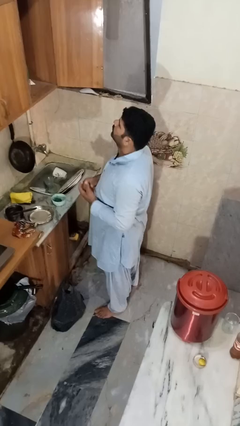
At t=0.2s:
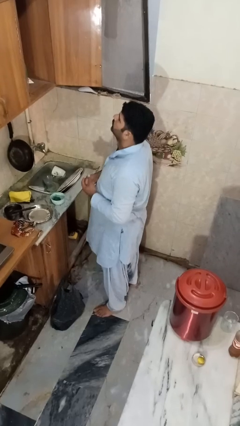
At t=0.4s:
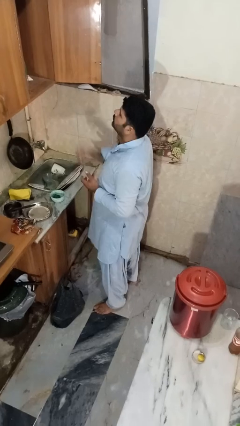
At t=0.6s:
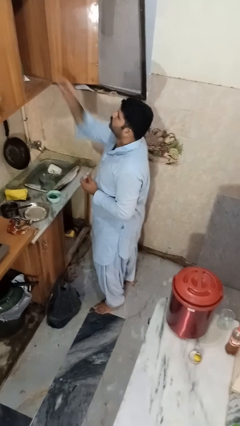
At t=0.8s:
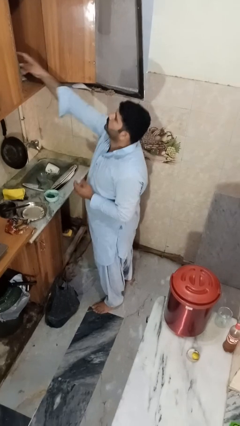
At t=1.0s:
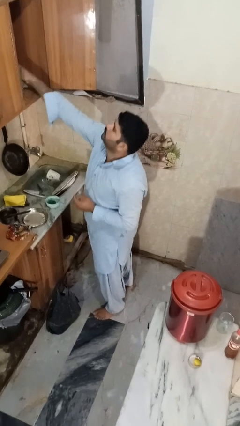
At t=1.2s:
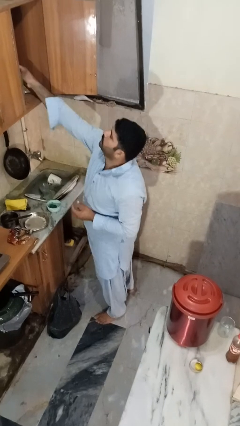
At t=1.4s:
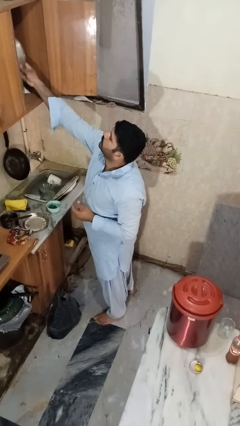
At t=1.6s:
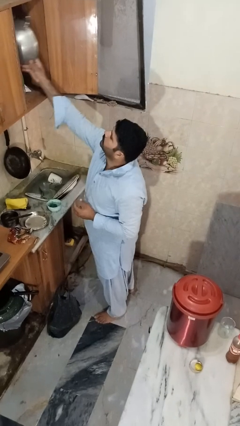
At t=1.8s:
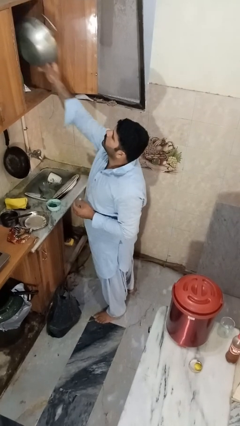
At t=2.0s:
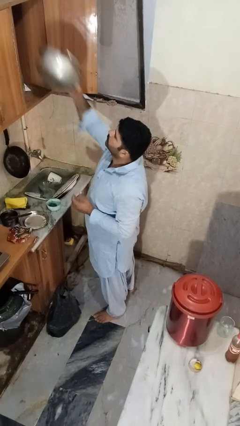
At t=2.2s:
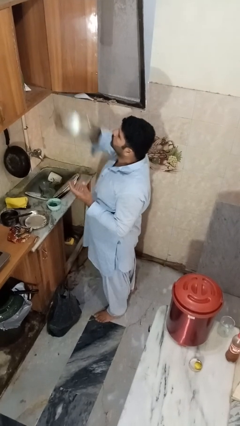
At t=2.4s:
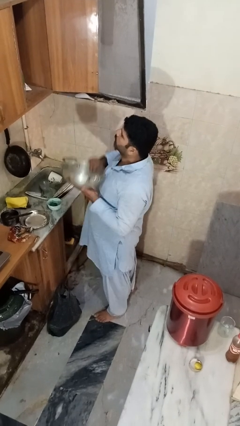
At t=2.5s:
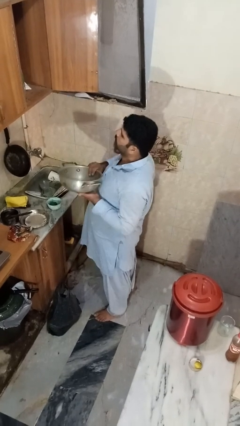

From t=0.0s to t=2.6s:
person takes object from cabinet

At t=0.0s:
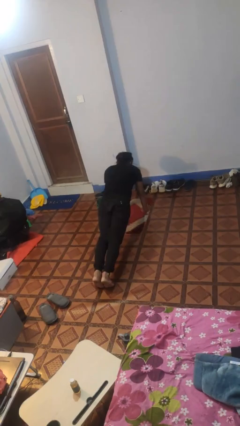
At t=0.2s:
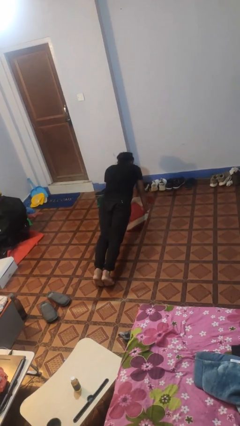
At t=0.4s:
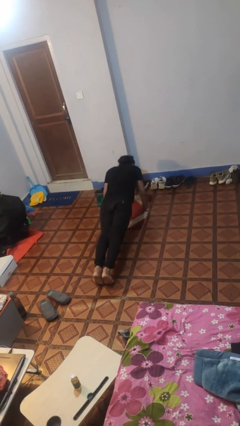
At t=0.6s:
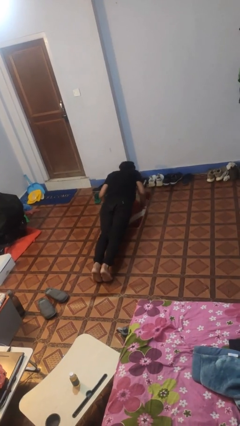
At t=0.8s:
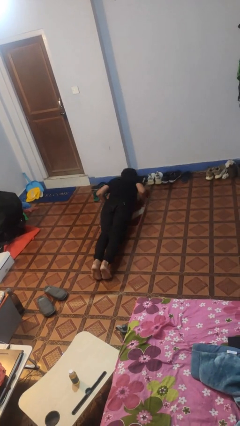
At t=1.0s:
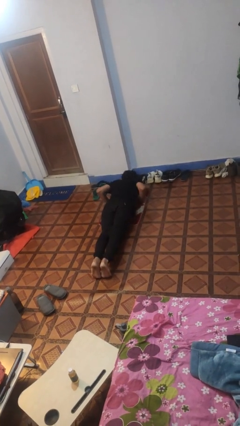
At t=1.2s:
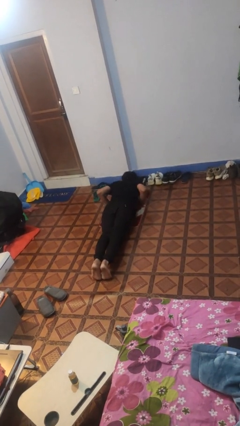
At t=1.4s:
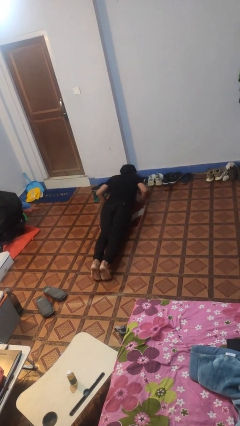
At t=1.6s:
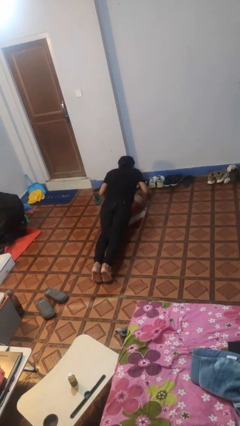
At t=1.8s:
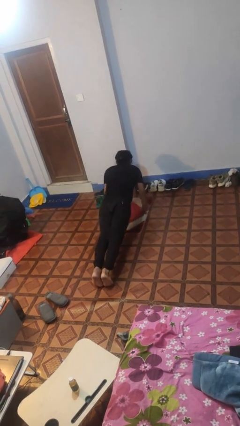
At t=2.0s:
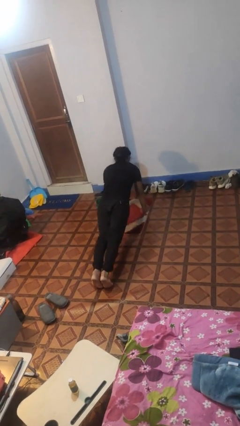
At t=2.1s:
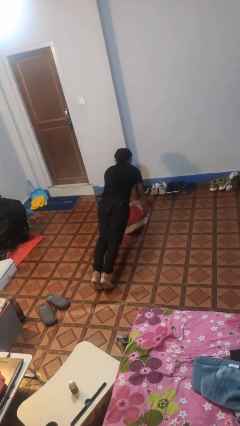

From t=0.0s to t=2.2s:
person exercises with pushup

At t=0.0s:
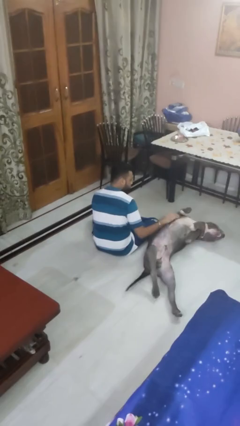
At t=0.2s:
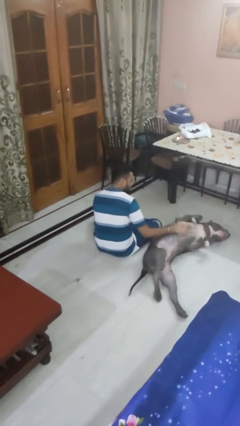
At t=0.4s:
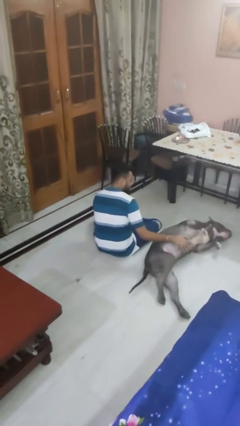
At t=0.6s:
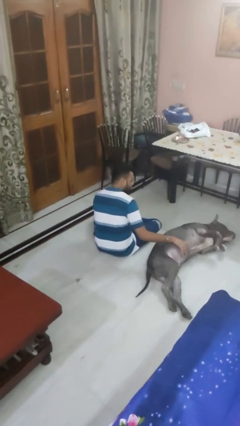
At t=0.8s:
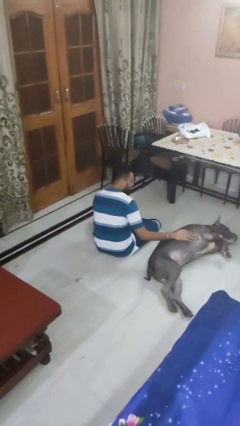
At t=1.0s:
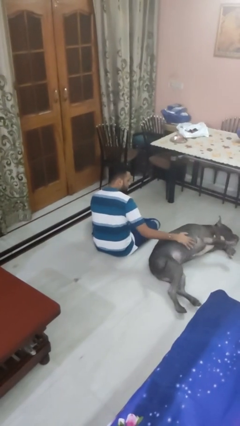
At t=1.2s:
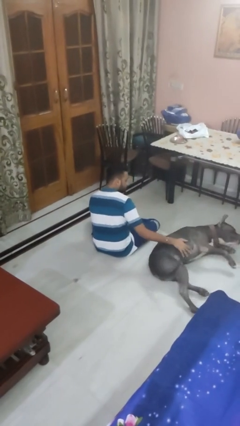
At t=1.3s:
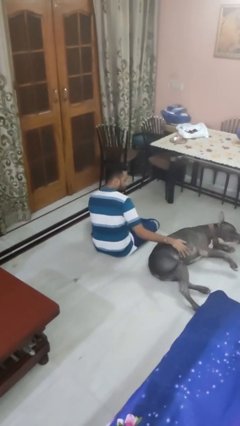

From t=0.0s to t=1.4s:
person pets dog

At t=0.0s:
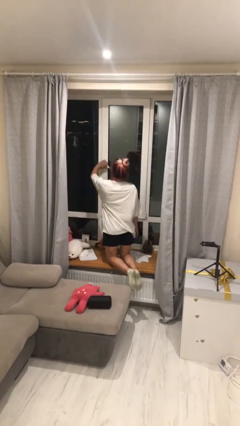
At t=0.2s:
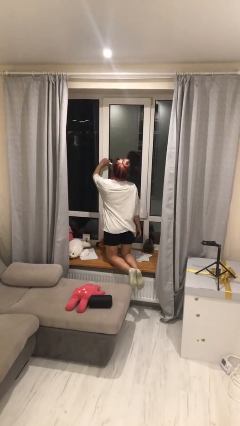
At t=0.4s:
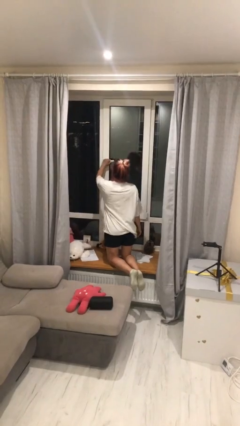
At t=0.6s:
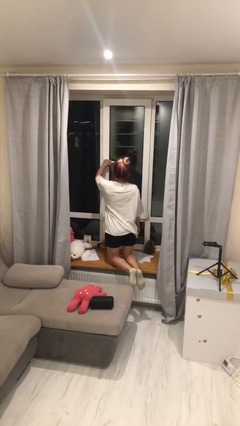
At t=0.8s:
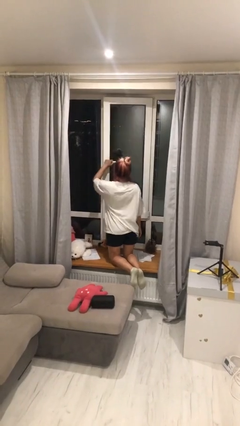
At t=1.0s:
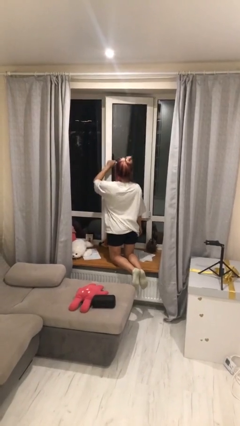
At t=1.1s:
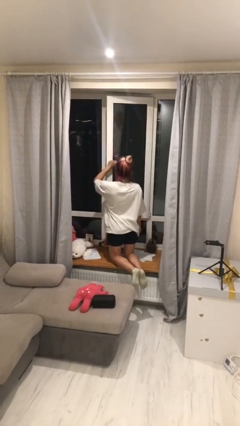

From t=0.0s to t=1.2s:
person opens home window

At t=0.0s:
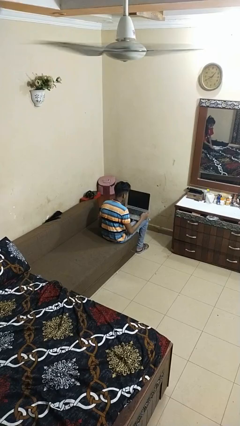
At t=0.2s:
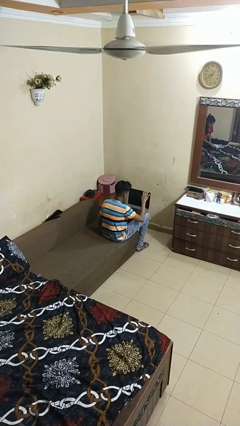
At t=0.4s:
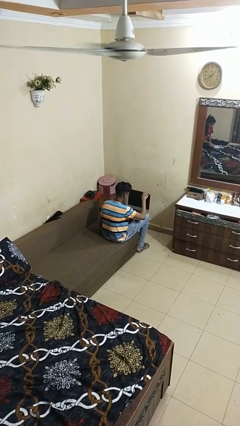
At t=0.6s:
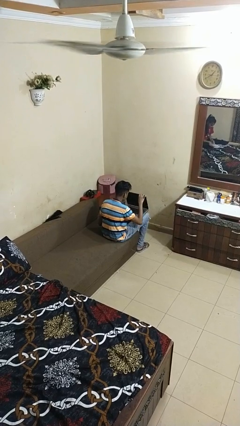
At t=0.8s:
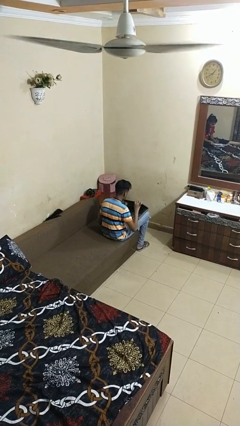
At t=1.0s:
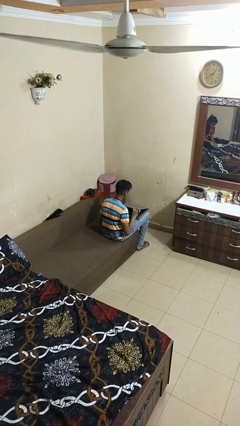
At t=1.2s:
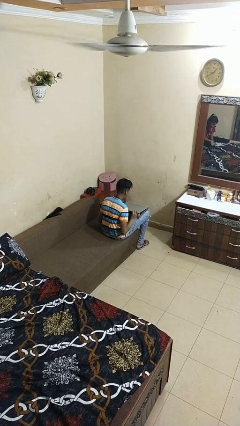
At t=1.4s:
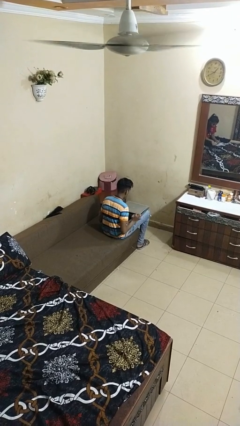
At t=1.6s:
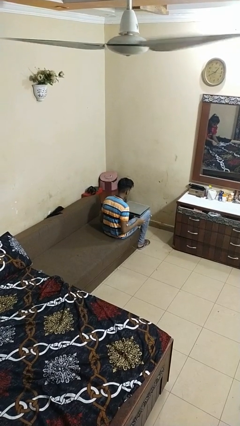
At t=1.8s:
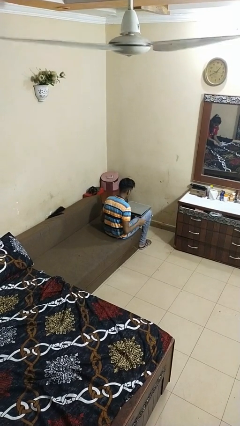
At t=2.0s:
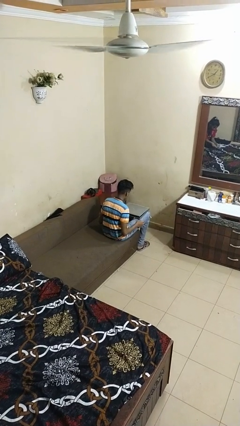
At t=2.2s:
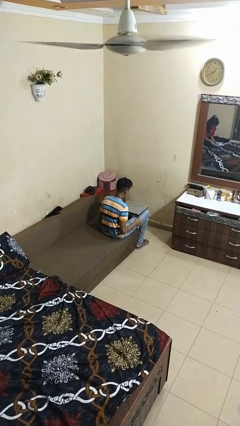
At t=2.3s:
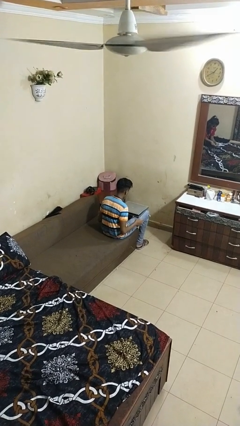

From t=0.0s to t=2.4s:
person closes laptop

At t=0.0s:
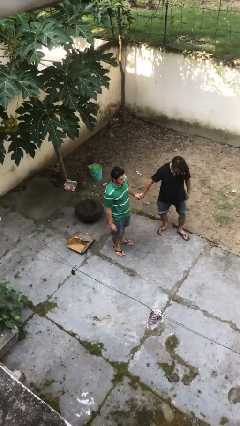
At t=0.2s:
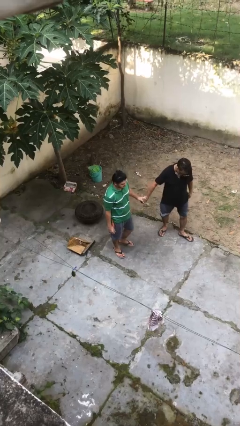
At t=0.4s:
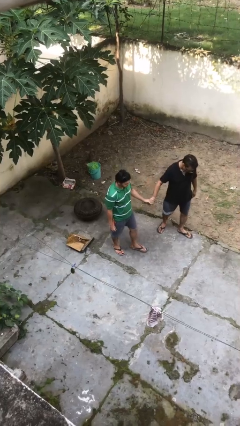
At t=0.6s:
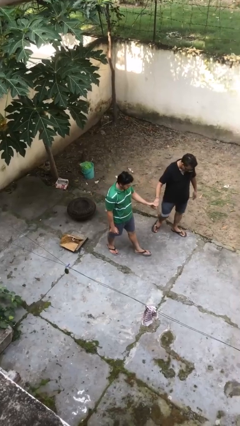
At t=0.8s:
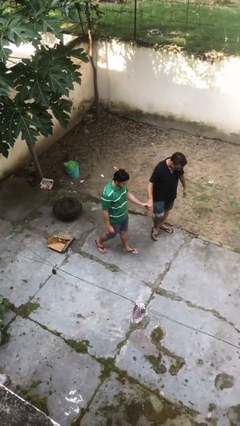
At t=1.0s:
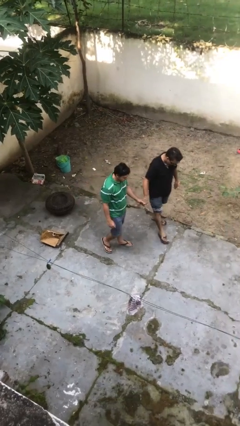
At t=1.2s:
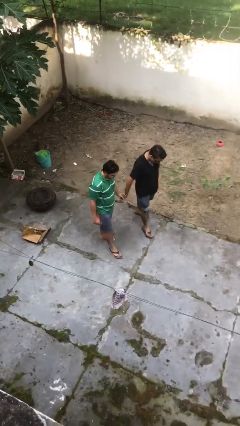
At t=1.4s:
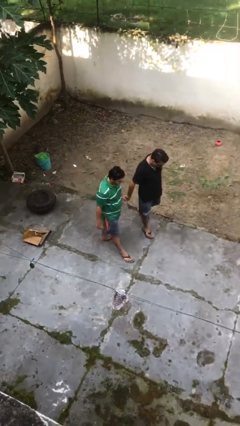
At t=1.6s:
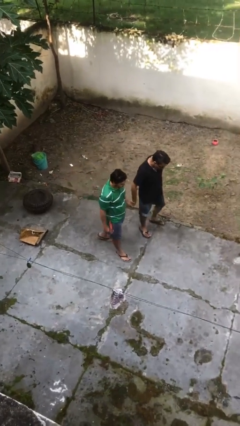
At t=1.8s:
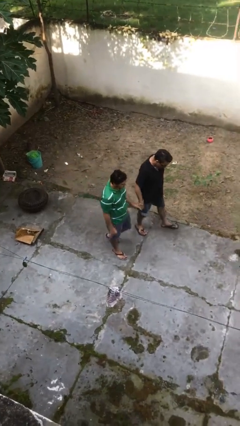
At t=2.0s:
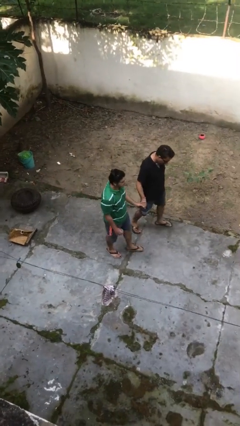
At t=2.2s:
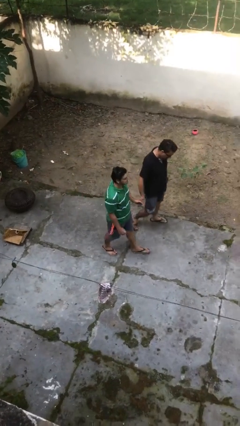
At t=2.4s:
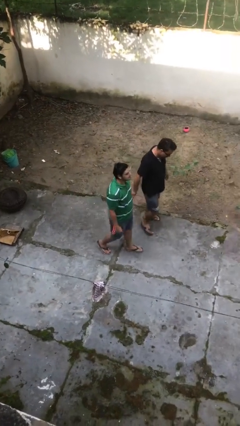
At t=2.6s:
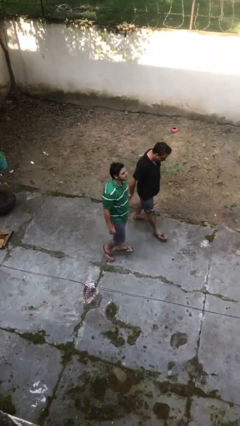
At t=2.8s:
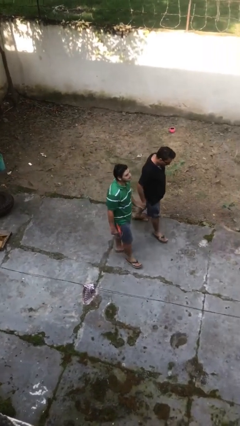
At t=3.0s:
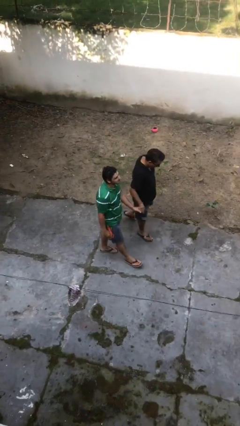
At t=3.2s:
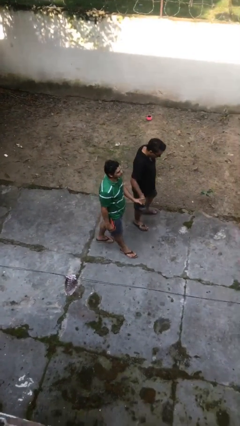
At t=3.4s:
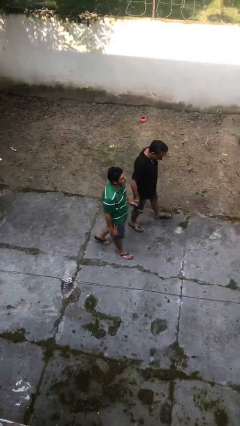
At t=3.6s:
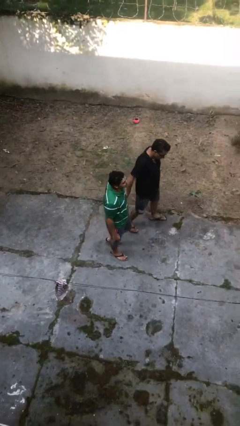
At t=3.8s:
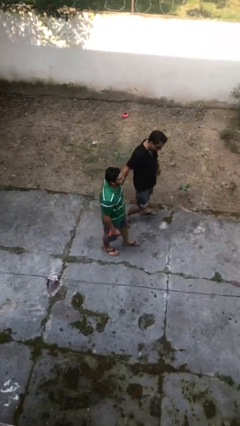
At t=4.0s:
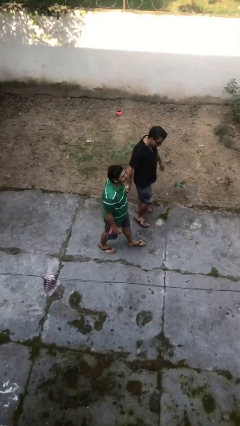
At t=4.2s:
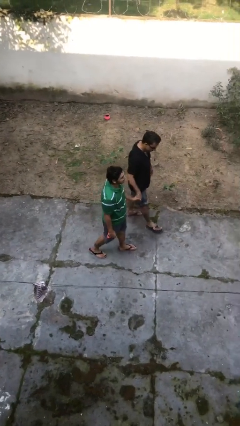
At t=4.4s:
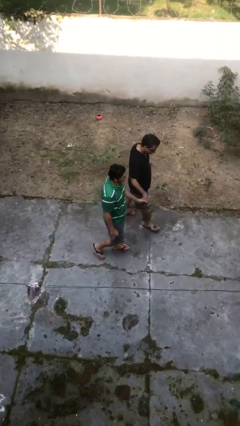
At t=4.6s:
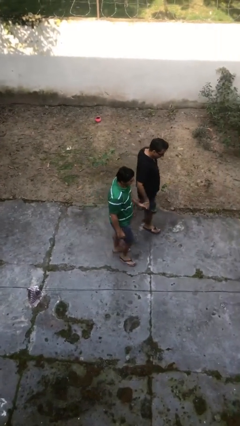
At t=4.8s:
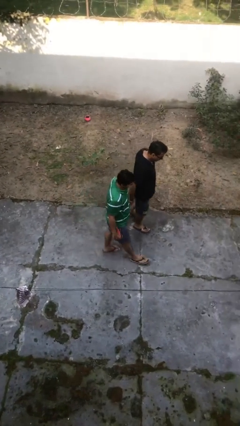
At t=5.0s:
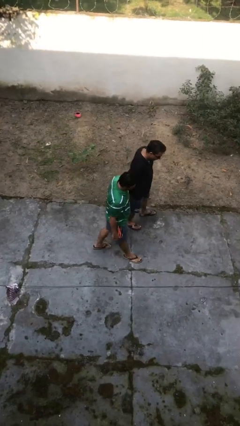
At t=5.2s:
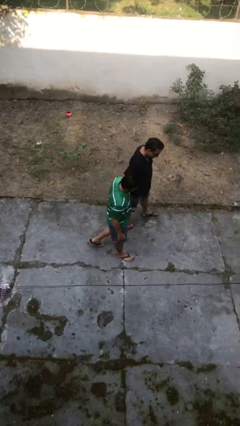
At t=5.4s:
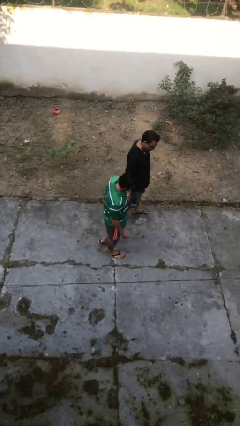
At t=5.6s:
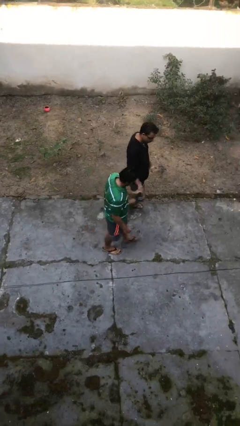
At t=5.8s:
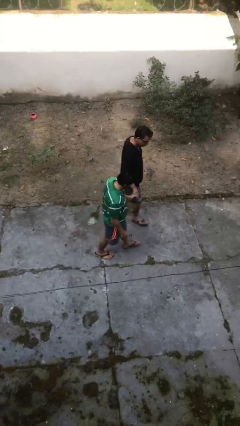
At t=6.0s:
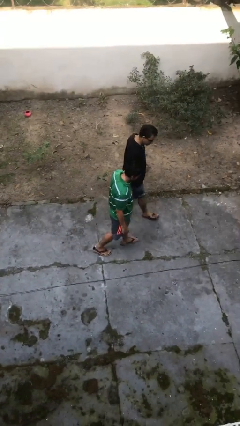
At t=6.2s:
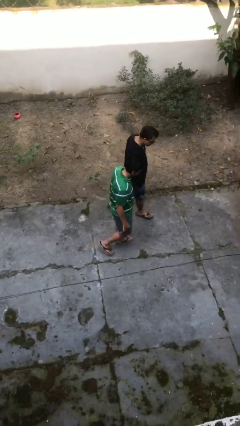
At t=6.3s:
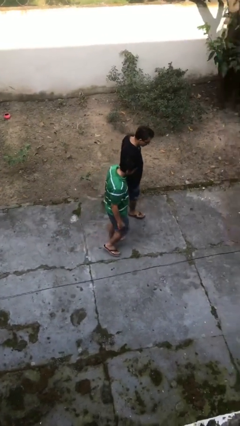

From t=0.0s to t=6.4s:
person holds hand

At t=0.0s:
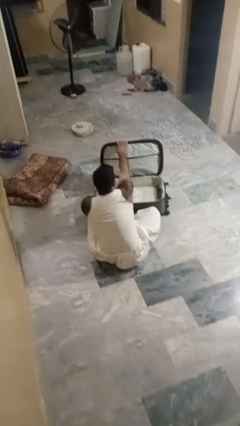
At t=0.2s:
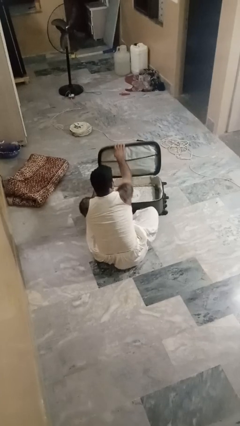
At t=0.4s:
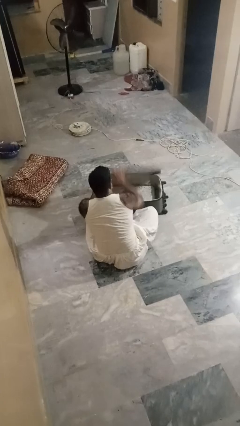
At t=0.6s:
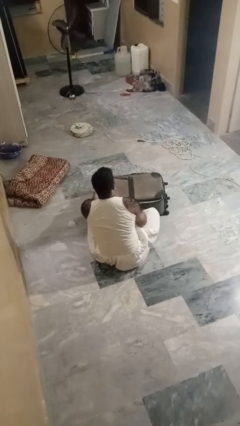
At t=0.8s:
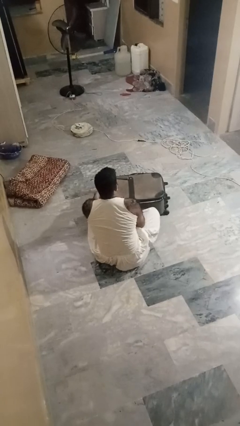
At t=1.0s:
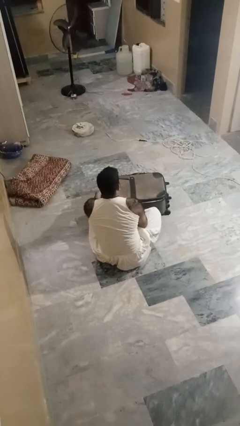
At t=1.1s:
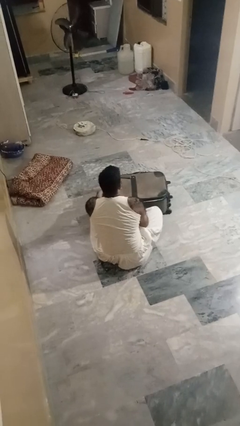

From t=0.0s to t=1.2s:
person closes suitcase
